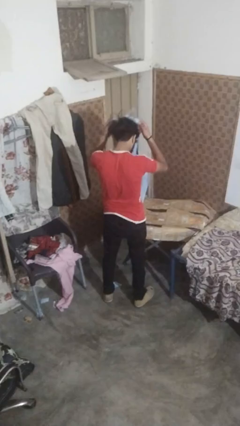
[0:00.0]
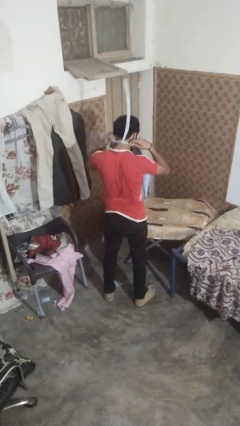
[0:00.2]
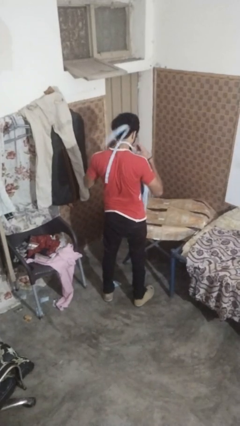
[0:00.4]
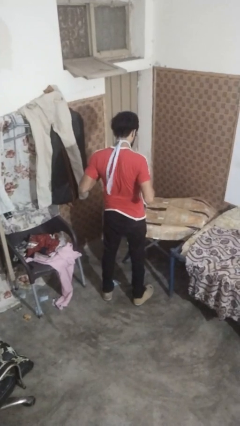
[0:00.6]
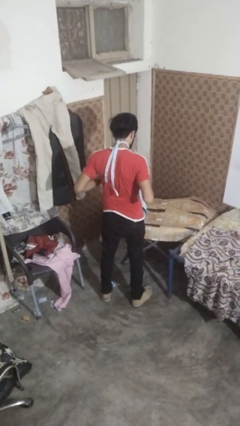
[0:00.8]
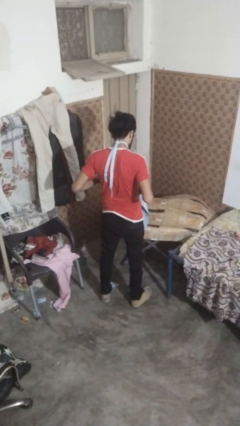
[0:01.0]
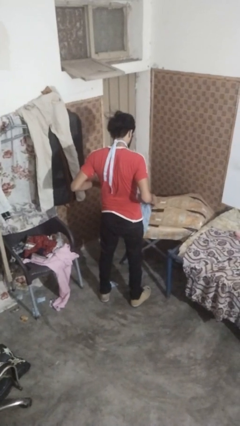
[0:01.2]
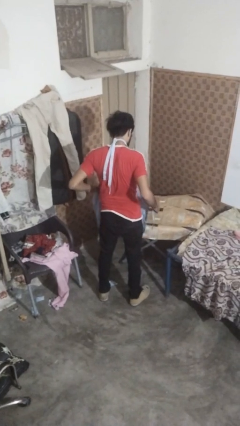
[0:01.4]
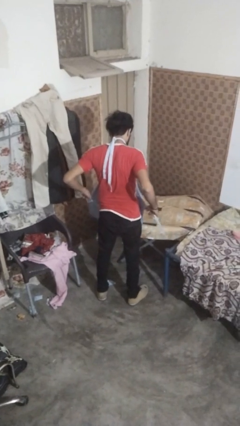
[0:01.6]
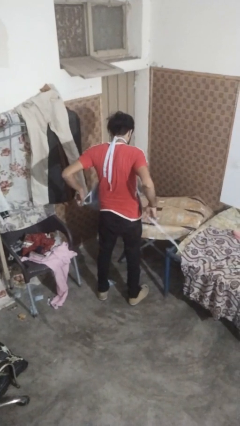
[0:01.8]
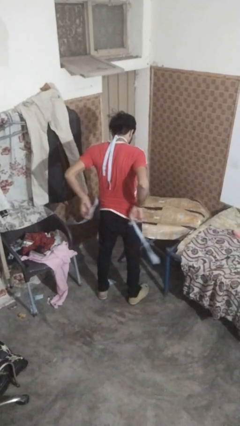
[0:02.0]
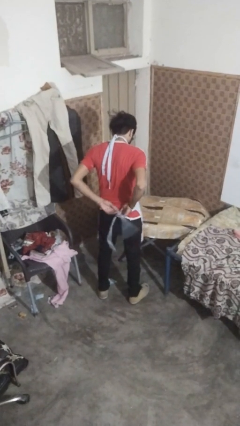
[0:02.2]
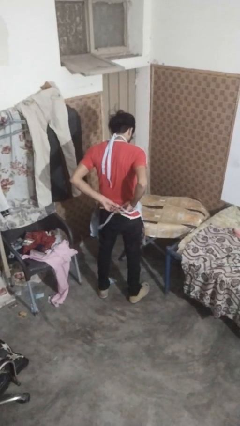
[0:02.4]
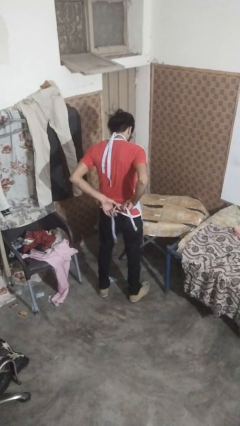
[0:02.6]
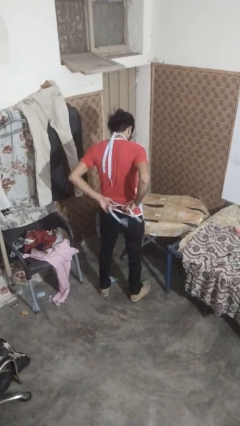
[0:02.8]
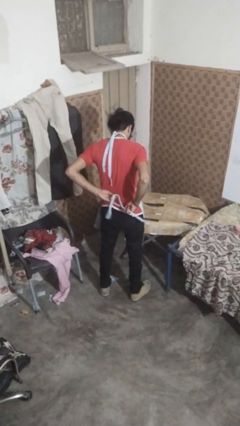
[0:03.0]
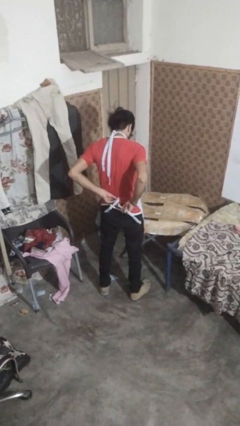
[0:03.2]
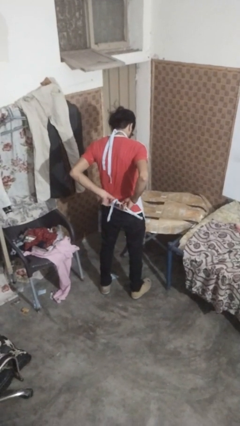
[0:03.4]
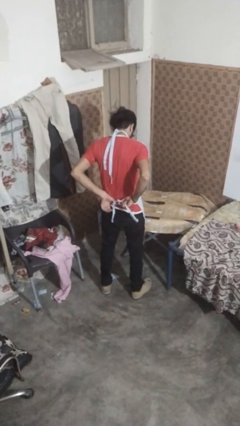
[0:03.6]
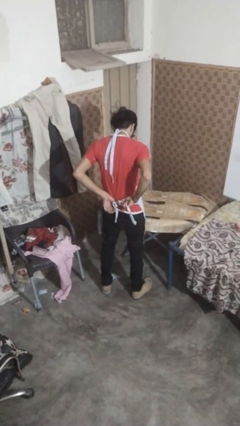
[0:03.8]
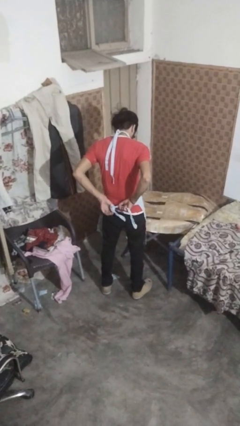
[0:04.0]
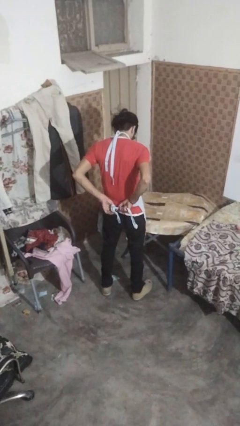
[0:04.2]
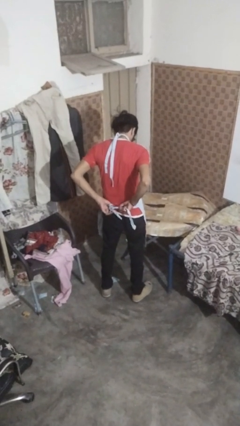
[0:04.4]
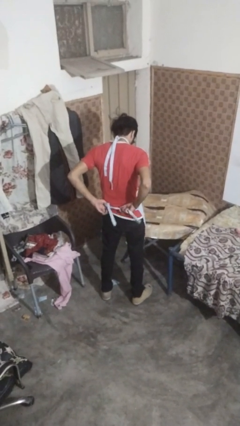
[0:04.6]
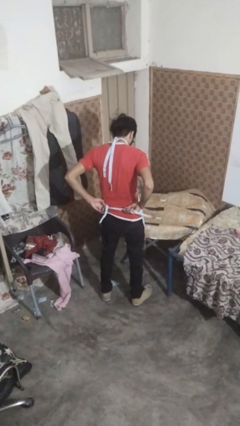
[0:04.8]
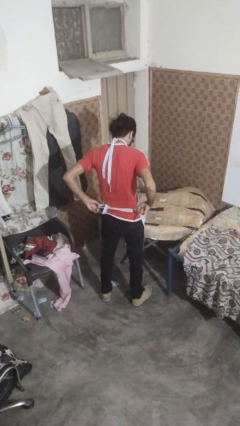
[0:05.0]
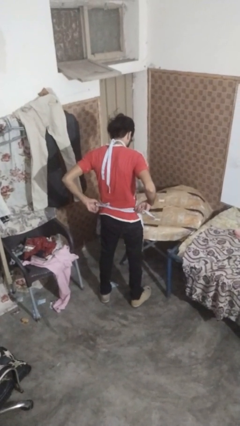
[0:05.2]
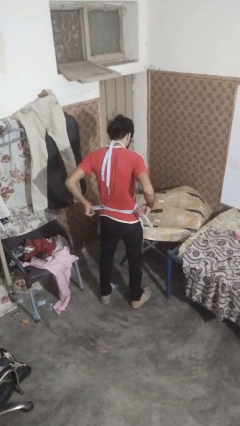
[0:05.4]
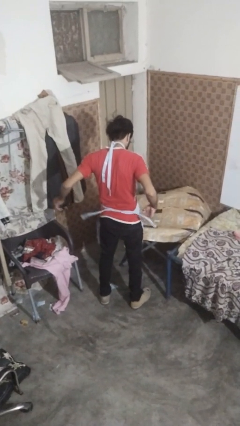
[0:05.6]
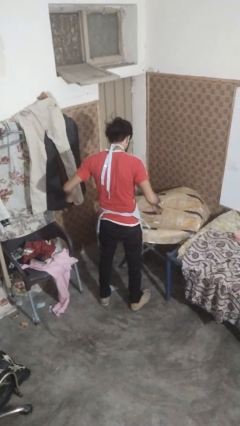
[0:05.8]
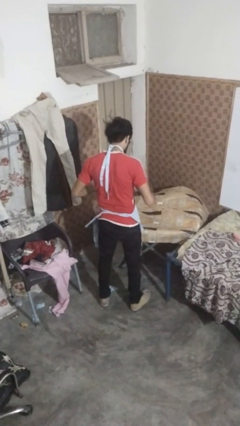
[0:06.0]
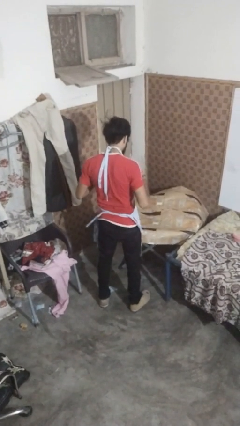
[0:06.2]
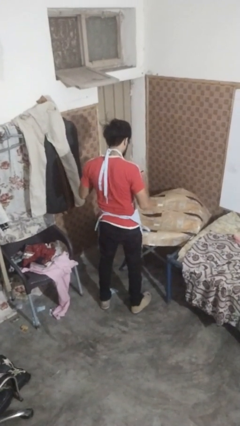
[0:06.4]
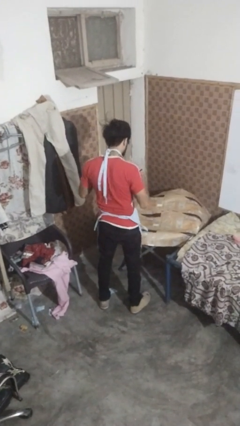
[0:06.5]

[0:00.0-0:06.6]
person puts on apron

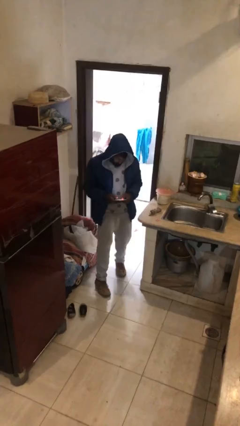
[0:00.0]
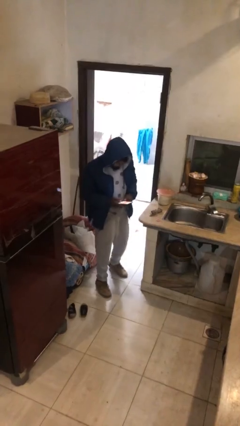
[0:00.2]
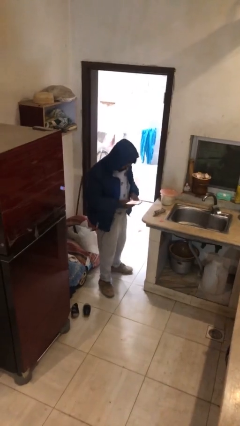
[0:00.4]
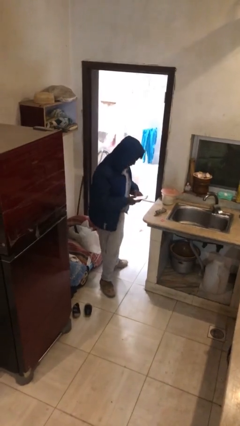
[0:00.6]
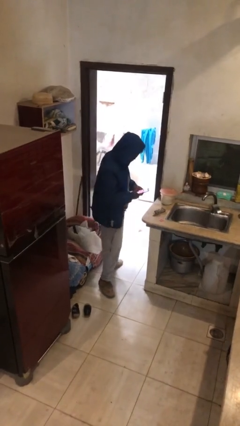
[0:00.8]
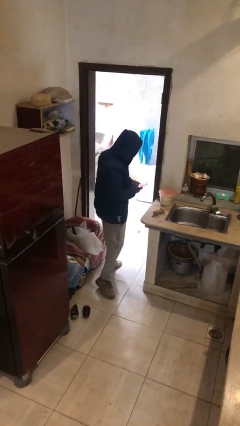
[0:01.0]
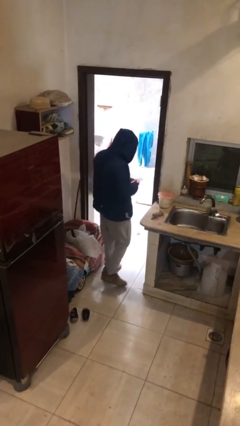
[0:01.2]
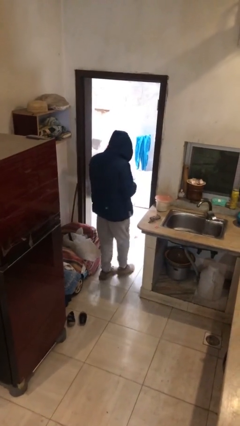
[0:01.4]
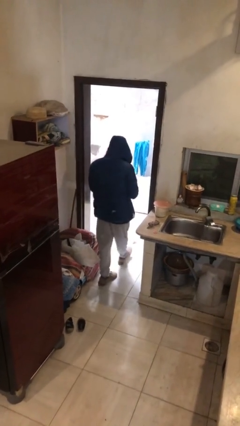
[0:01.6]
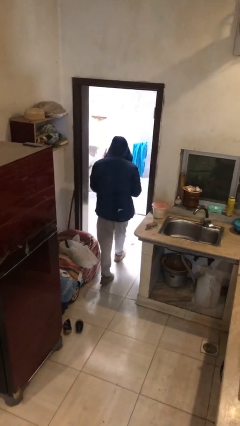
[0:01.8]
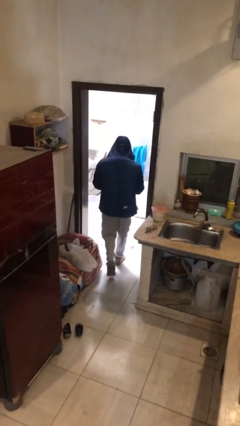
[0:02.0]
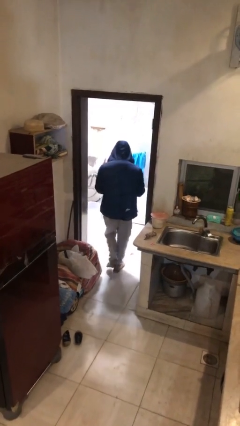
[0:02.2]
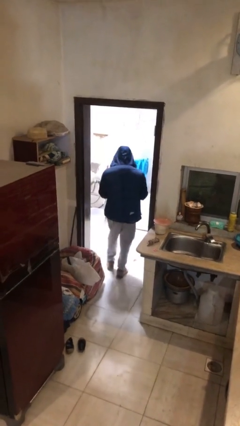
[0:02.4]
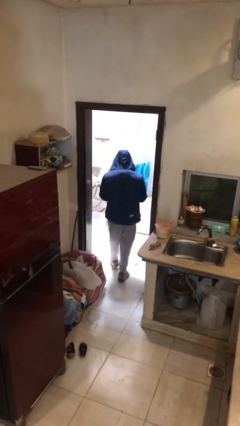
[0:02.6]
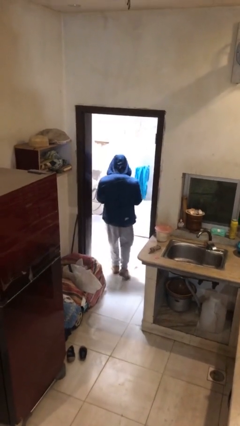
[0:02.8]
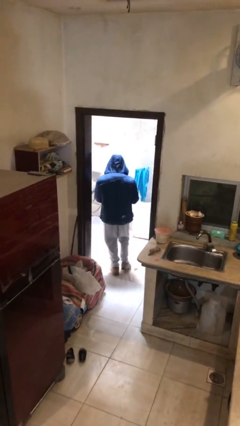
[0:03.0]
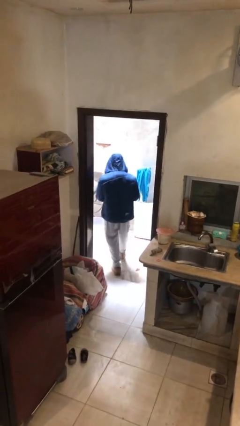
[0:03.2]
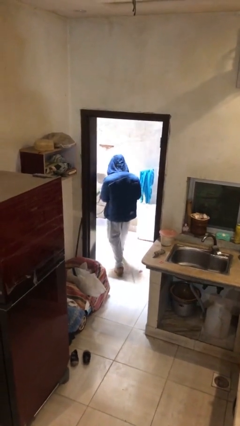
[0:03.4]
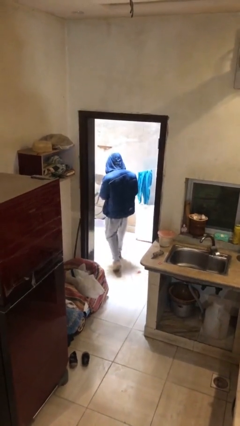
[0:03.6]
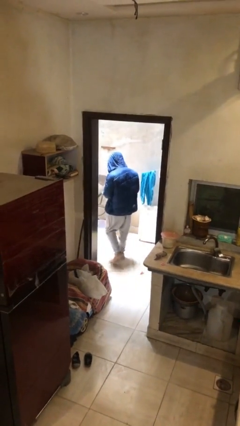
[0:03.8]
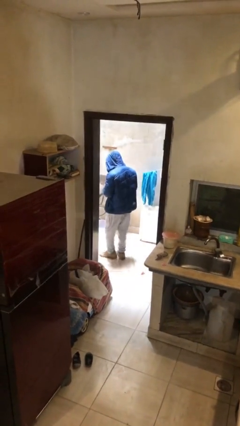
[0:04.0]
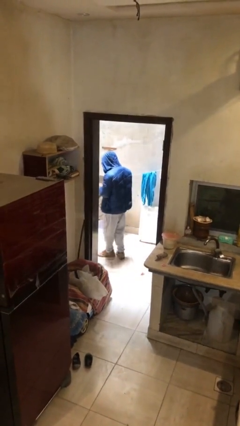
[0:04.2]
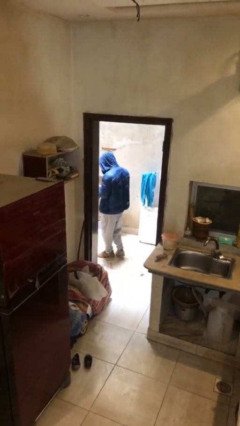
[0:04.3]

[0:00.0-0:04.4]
person exits scene through structure

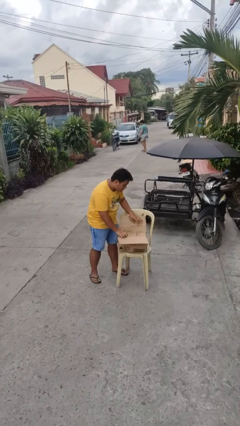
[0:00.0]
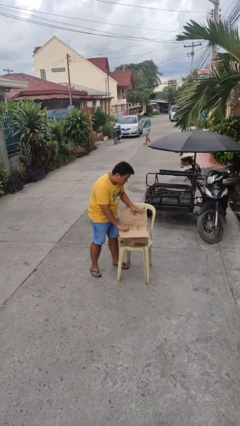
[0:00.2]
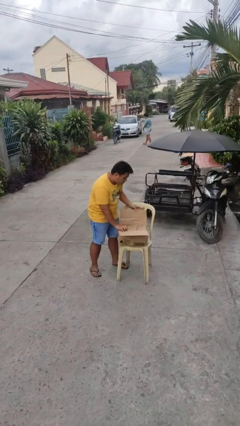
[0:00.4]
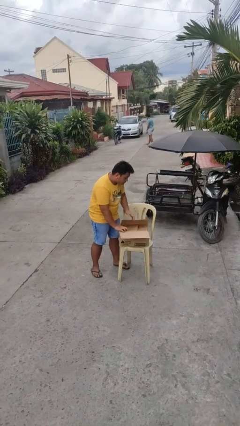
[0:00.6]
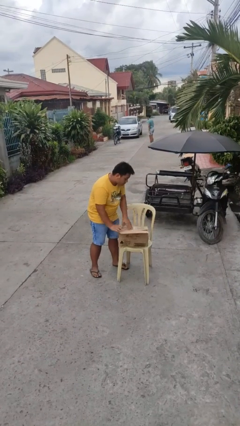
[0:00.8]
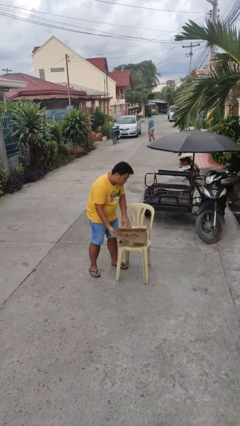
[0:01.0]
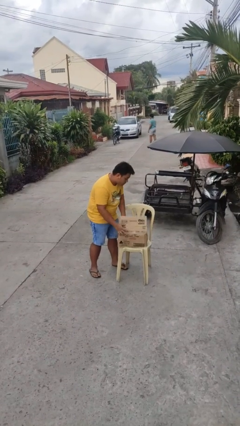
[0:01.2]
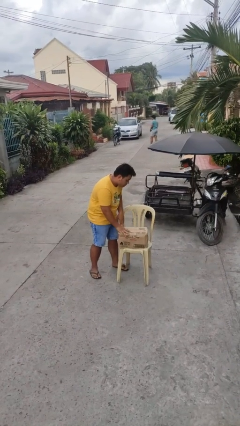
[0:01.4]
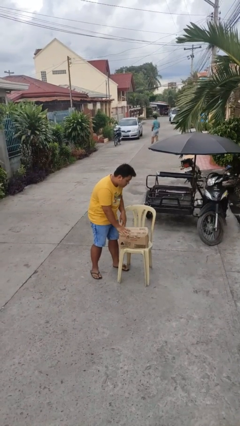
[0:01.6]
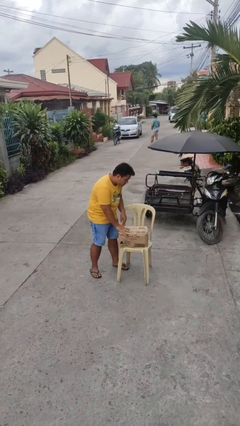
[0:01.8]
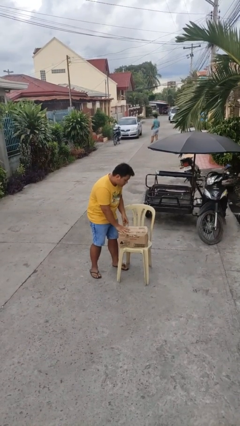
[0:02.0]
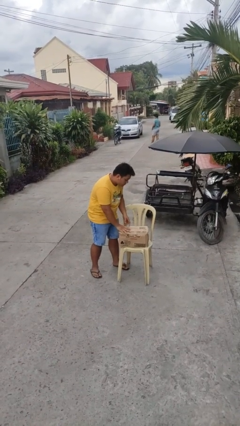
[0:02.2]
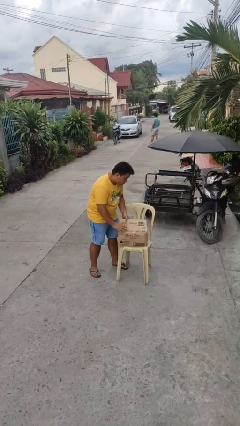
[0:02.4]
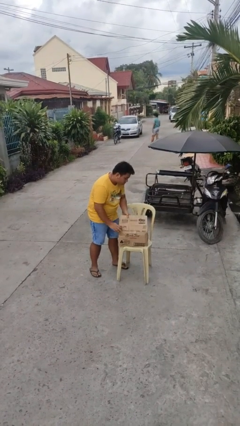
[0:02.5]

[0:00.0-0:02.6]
person closes box

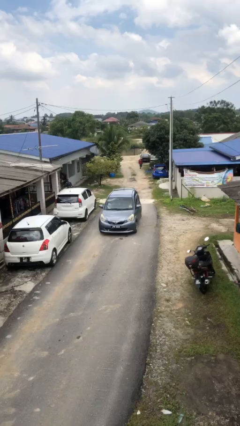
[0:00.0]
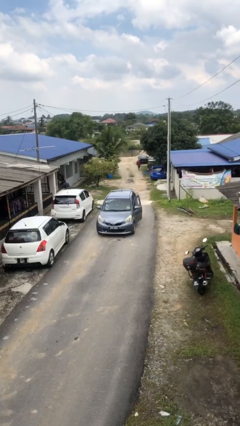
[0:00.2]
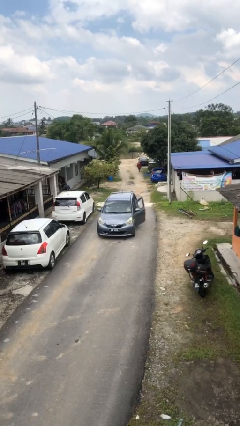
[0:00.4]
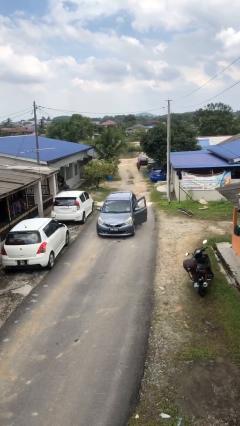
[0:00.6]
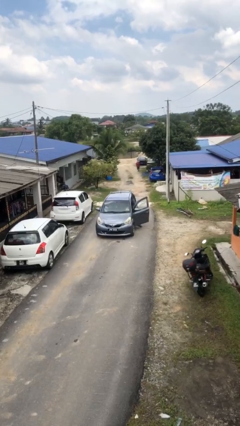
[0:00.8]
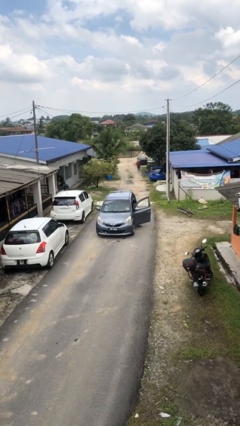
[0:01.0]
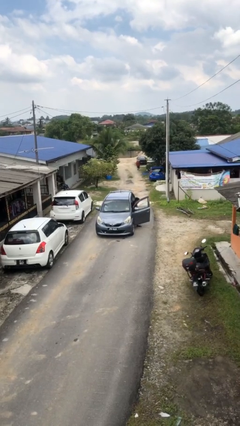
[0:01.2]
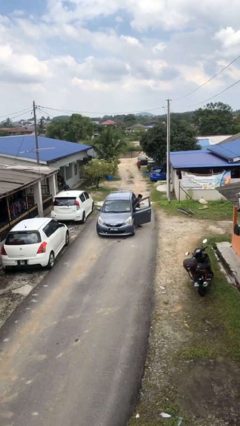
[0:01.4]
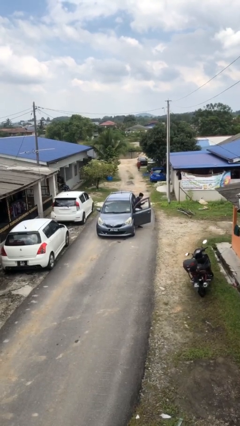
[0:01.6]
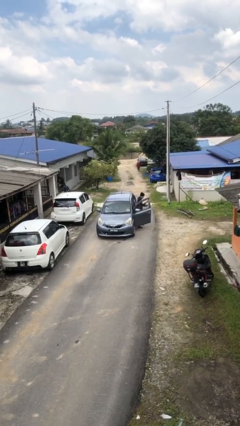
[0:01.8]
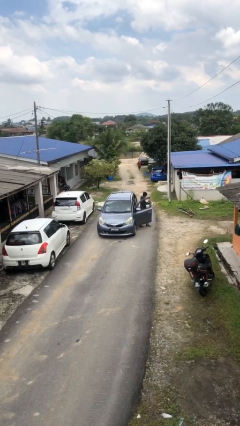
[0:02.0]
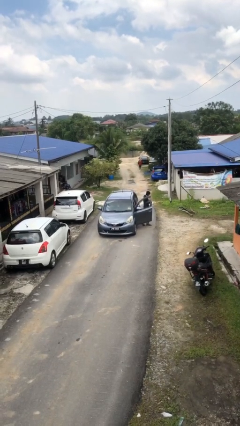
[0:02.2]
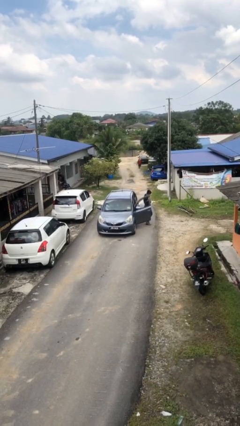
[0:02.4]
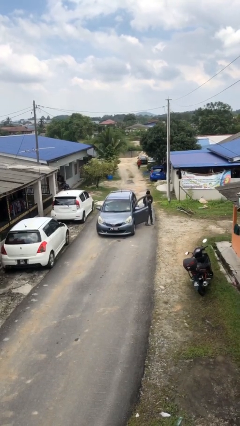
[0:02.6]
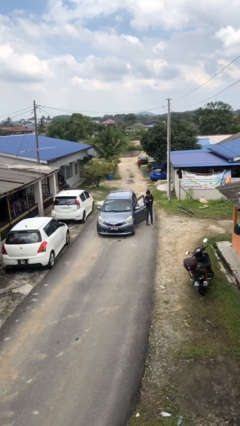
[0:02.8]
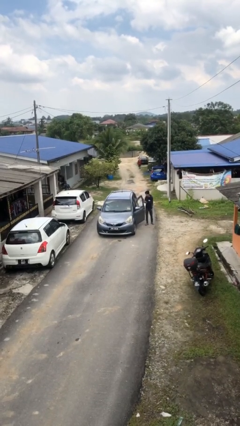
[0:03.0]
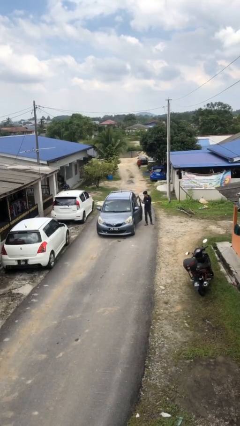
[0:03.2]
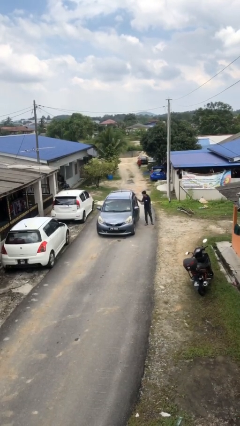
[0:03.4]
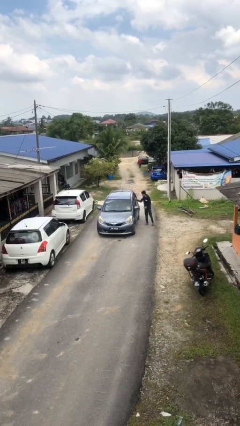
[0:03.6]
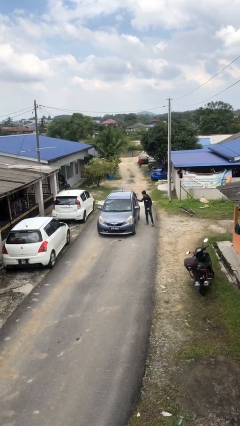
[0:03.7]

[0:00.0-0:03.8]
car drops off person

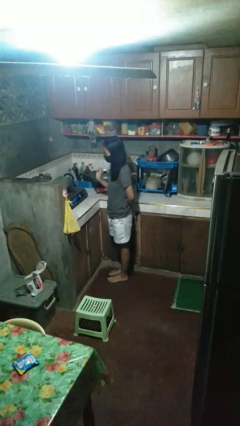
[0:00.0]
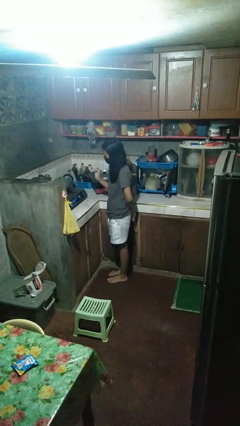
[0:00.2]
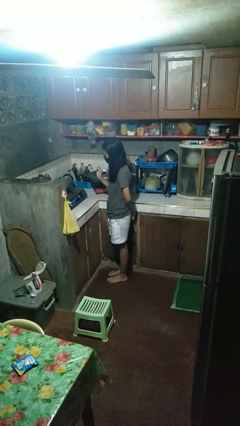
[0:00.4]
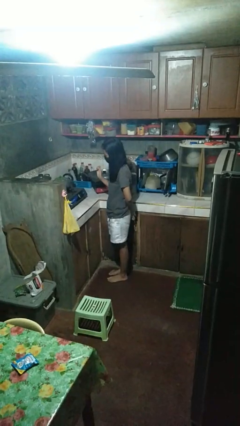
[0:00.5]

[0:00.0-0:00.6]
person burns hand
